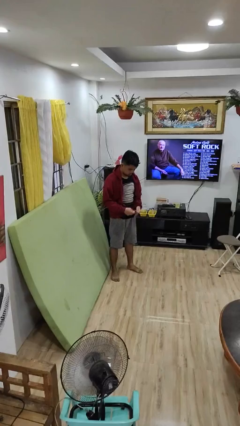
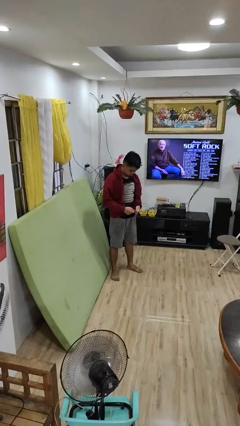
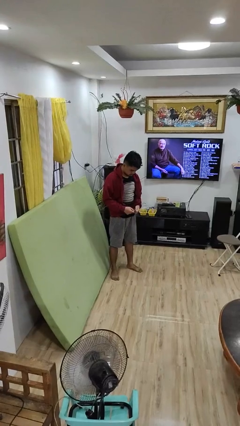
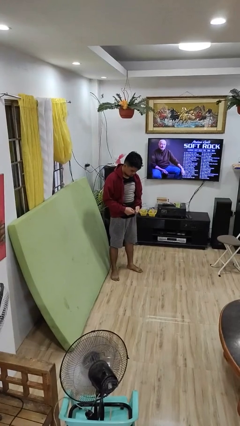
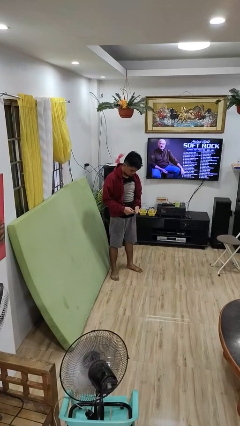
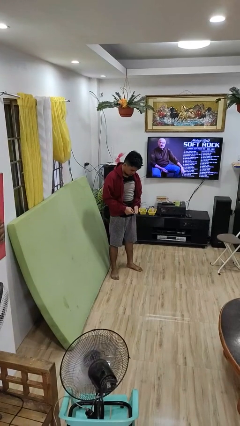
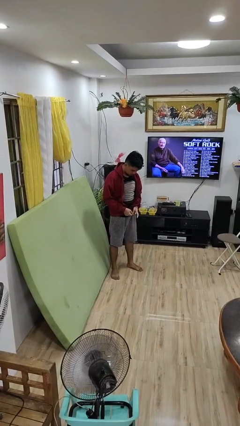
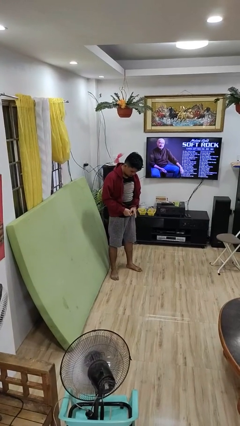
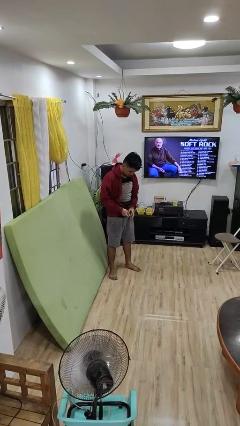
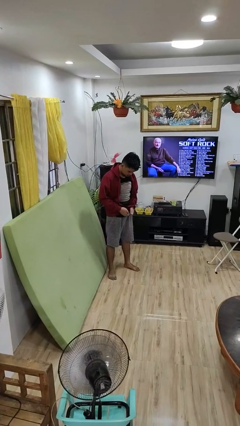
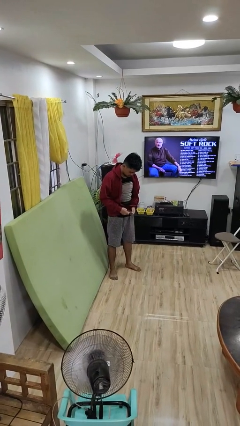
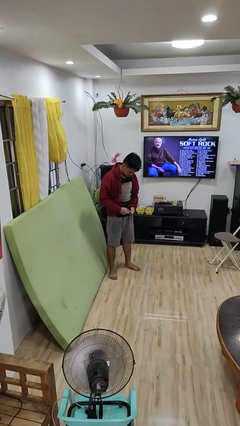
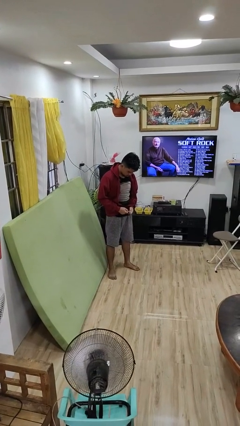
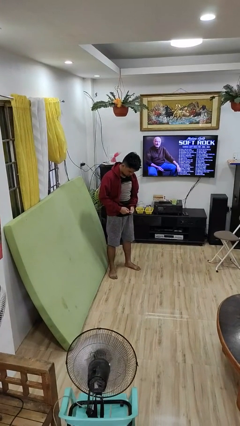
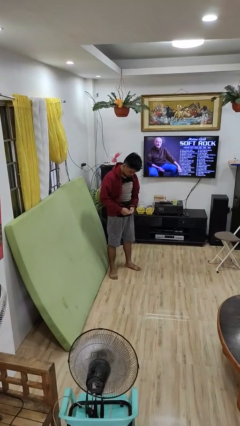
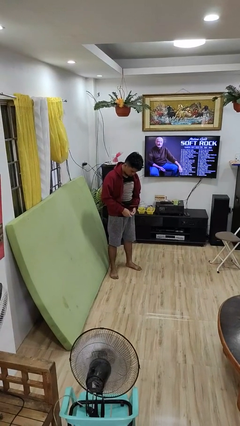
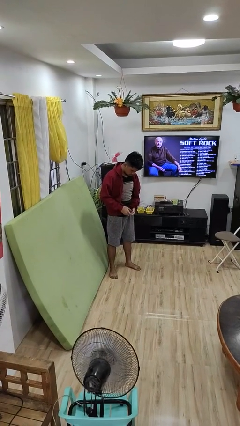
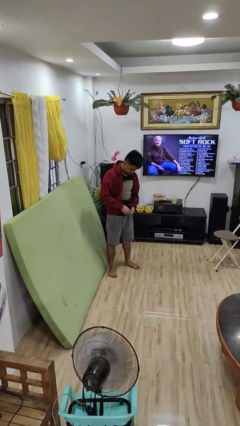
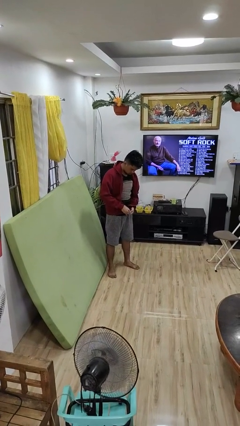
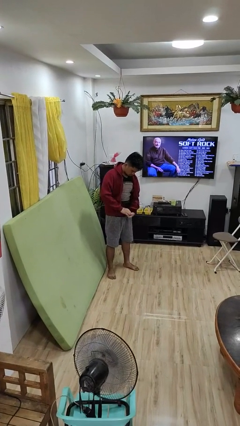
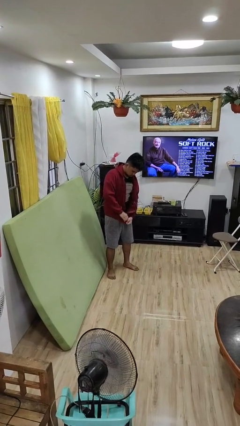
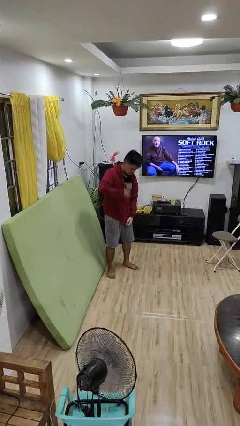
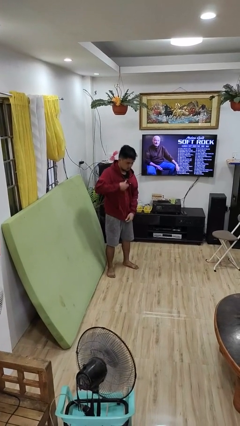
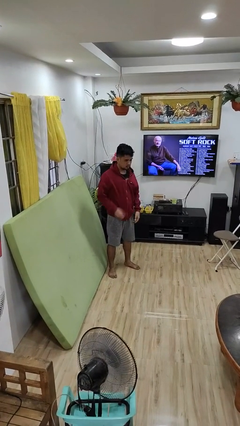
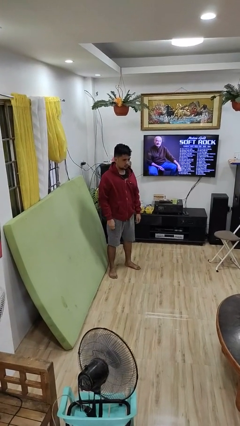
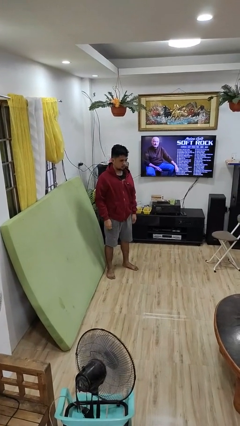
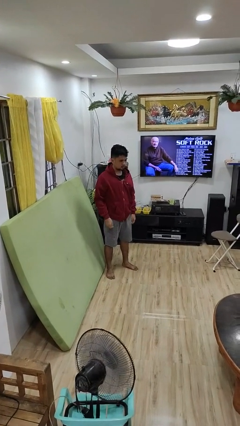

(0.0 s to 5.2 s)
person zips up jacket

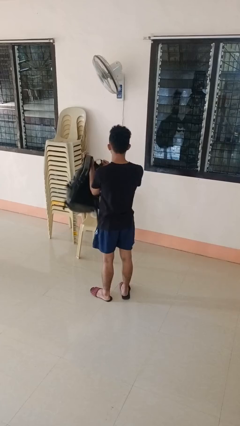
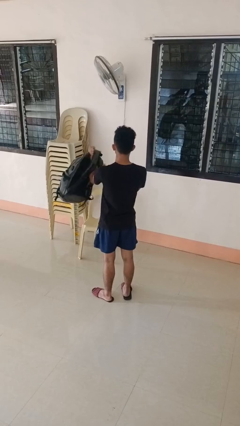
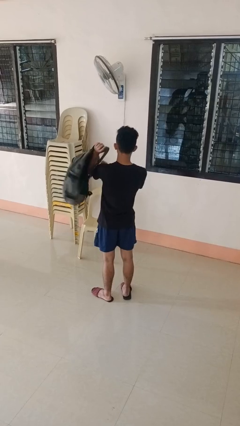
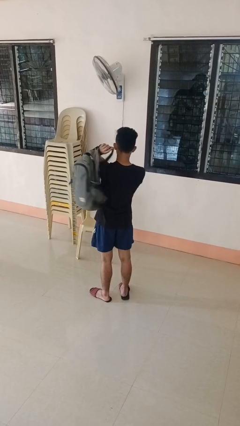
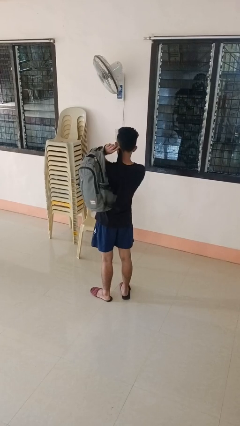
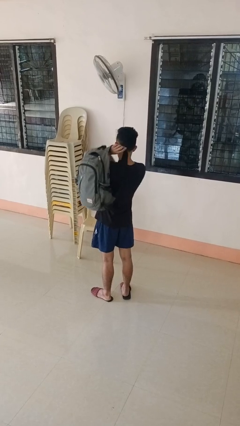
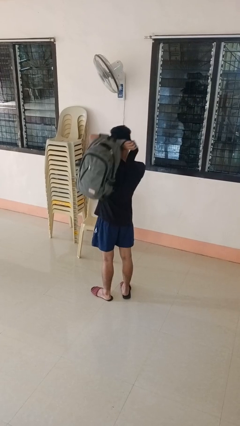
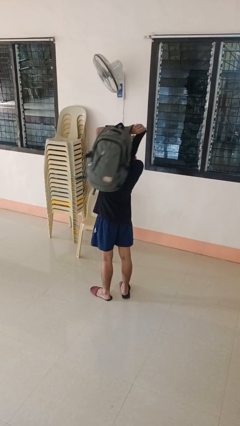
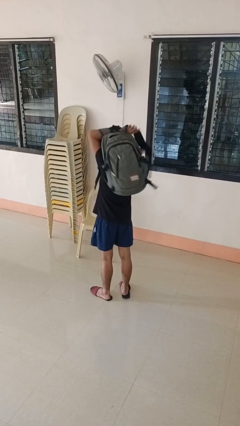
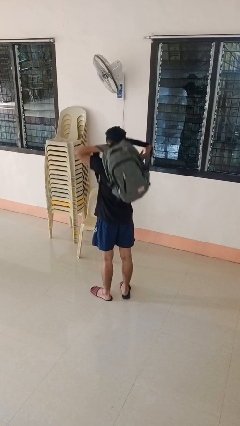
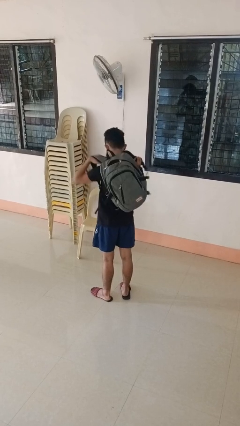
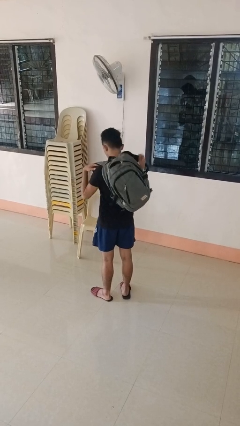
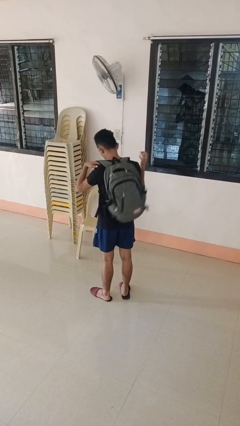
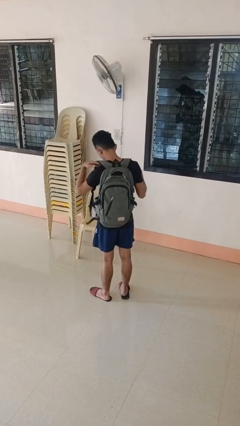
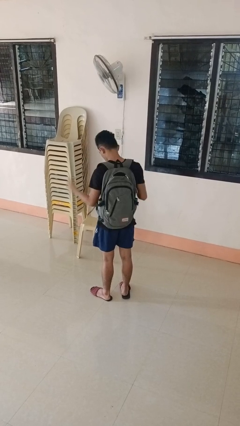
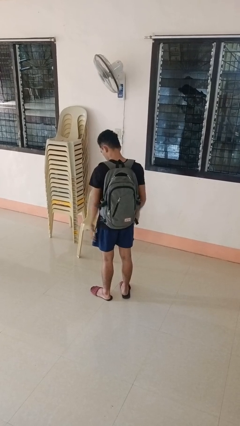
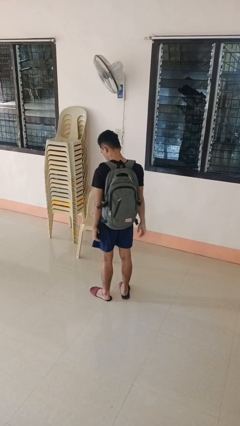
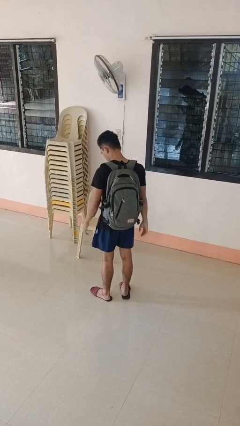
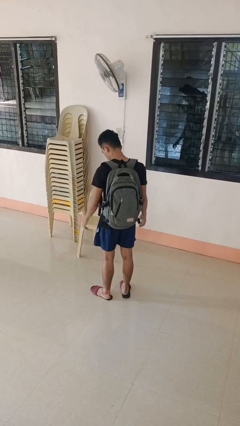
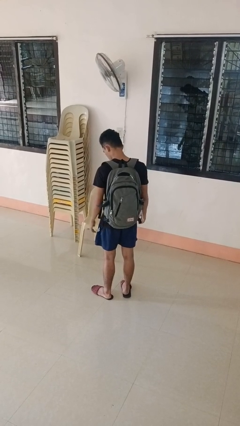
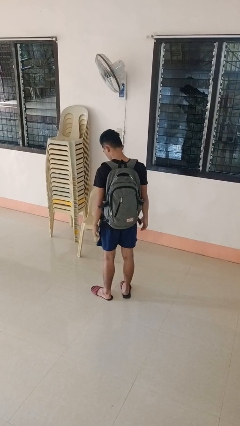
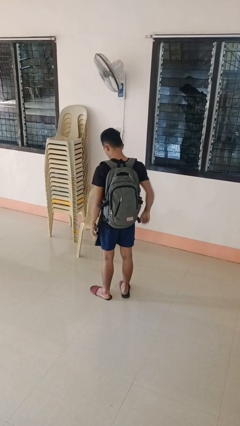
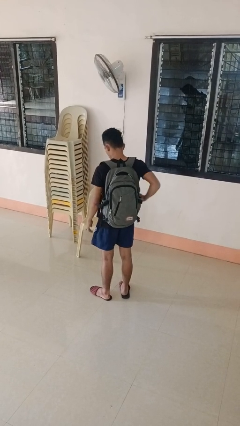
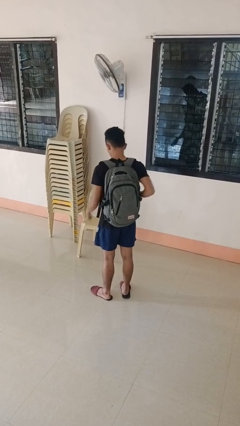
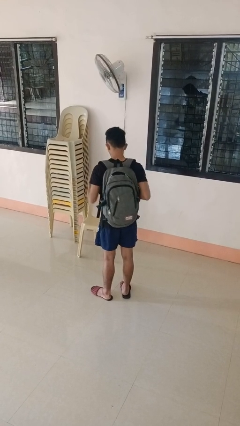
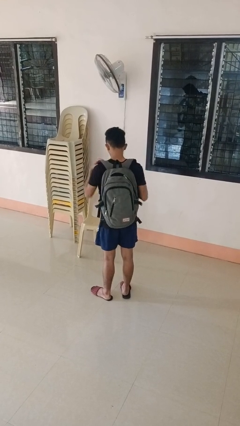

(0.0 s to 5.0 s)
person puts on backpack

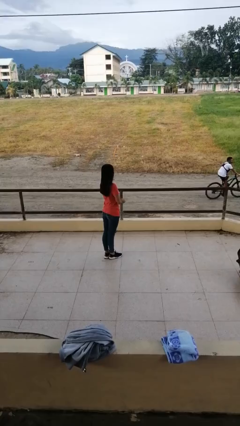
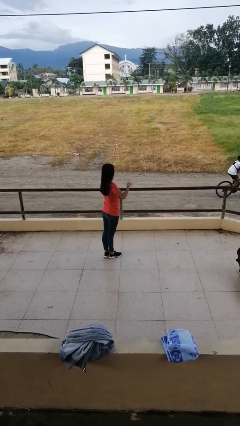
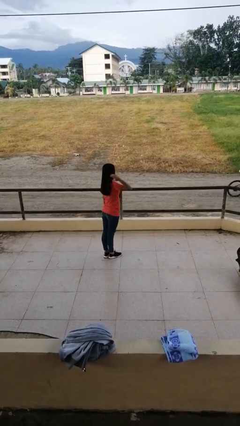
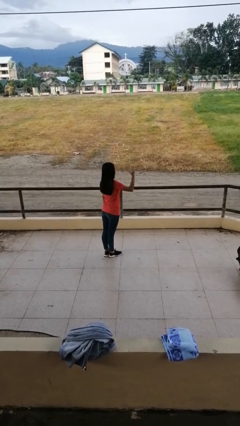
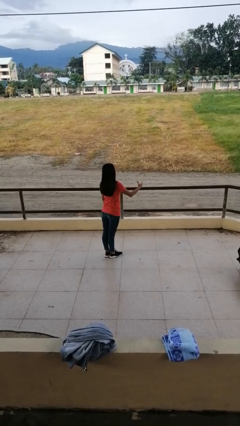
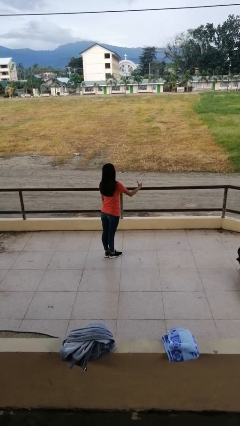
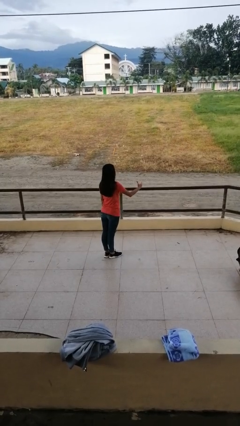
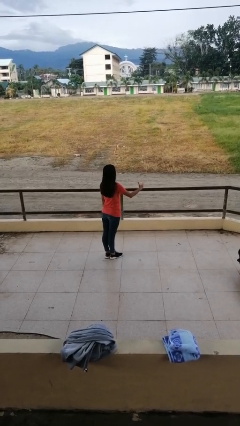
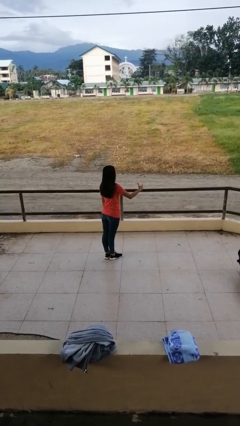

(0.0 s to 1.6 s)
person karate chop

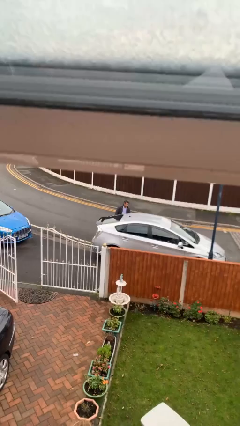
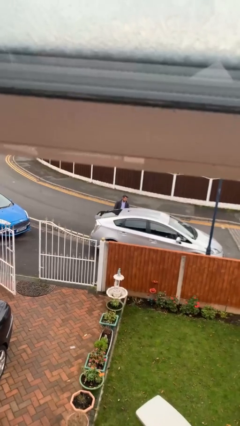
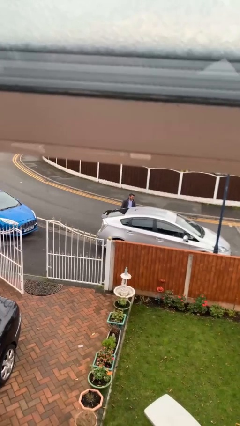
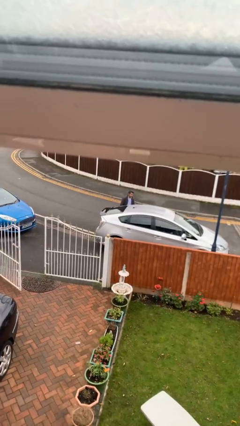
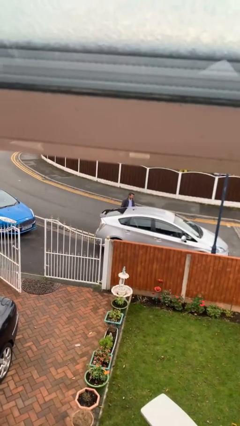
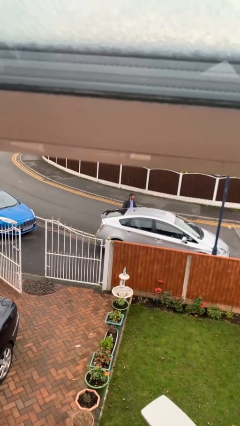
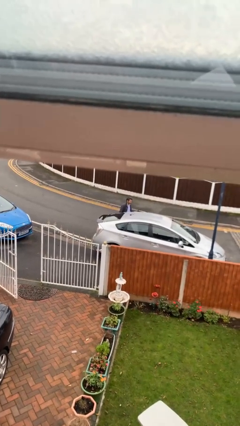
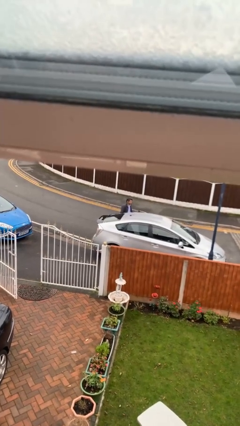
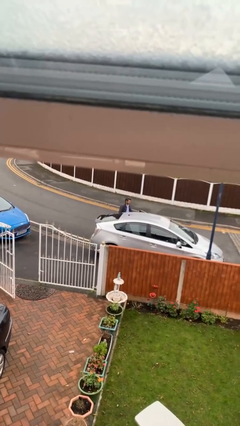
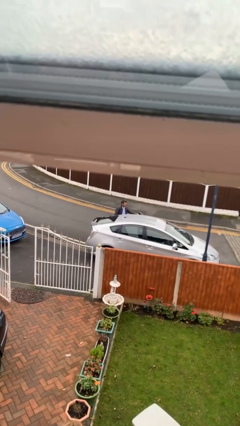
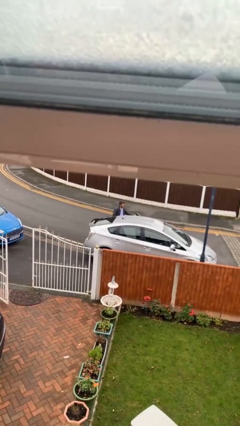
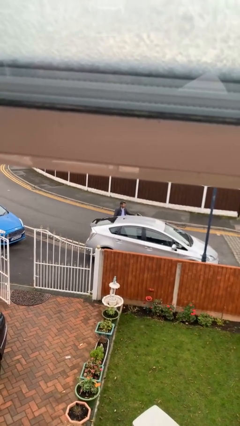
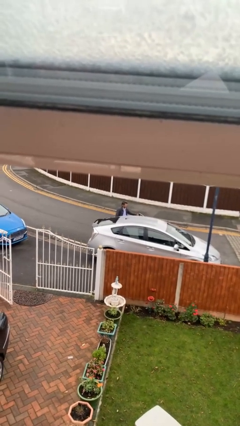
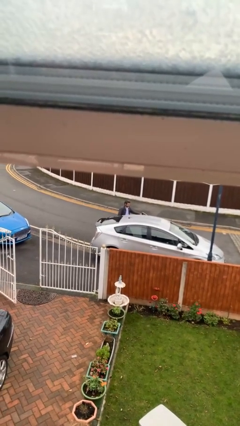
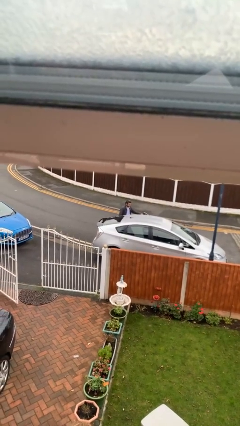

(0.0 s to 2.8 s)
person opens car door

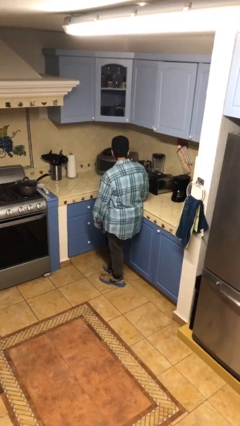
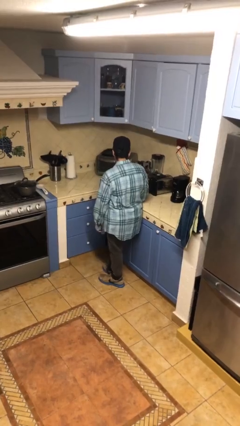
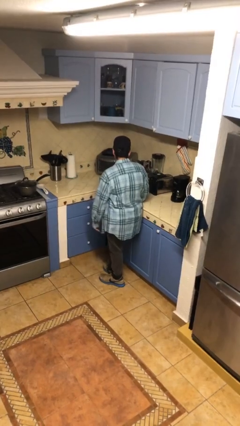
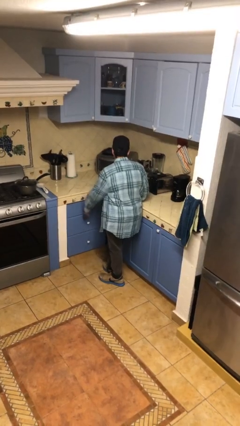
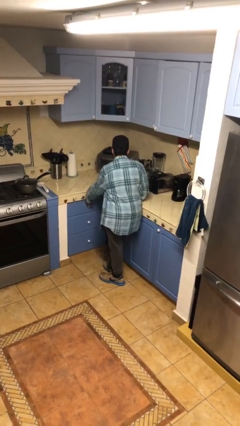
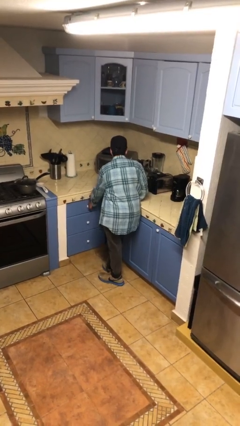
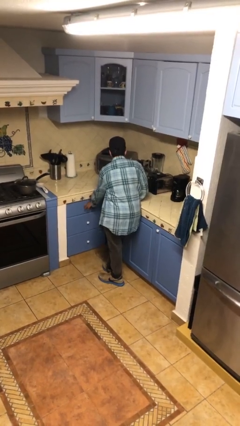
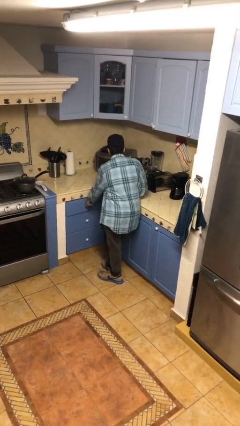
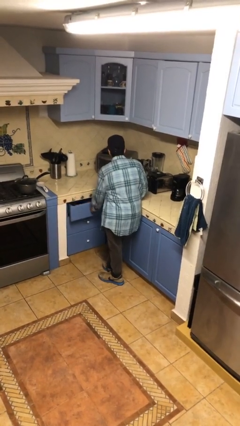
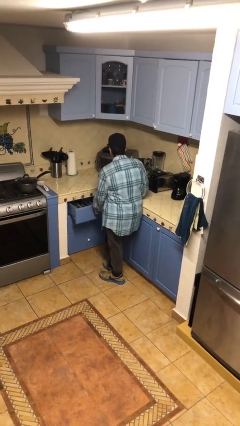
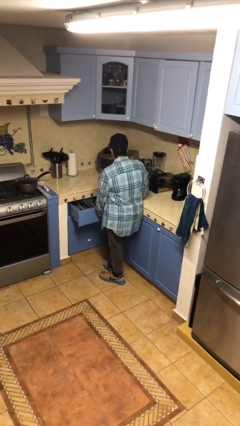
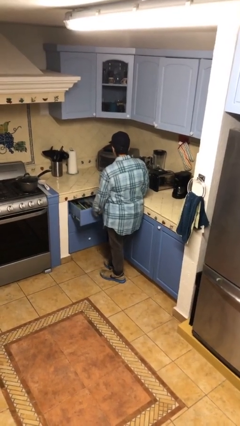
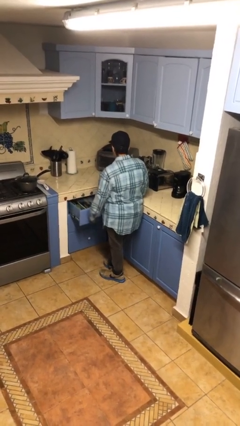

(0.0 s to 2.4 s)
person opens kitchen drawer

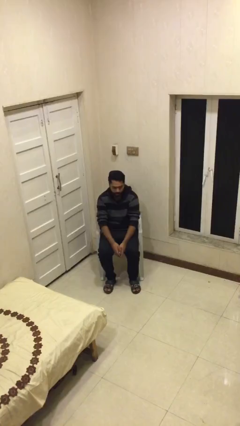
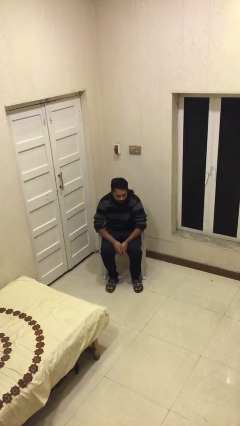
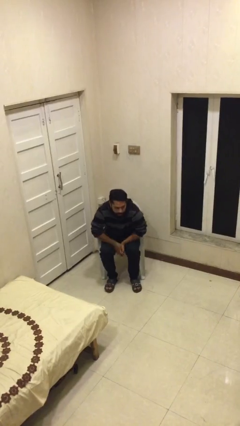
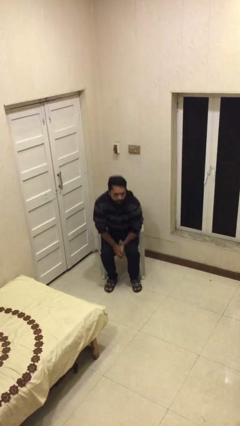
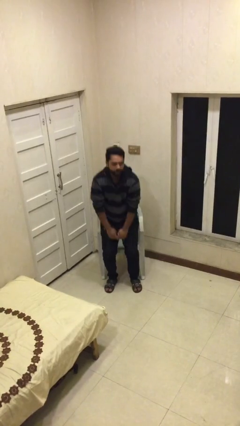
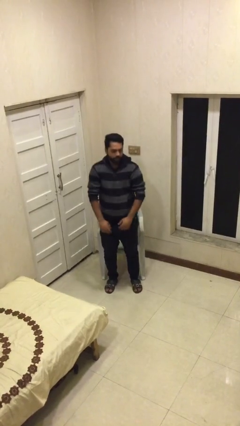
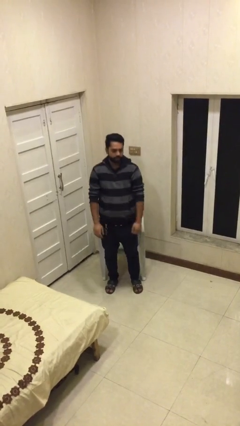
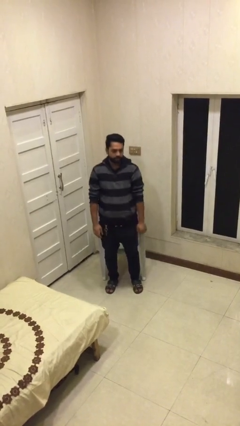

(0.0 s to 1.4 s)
person stands up
